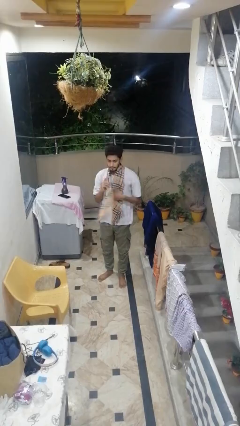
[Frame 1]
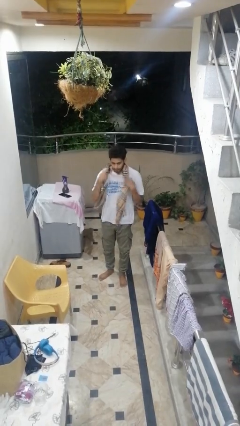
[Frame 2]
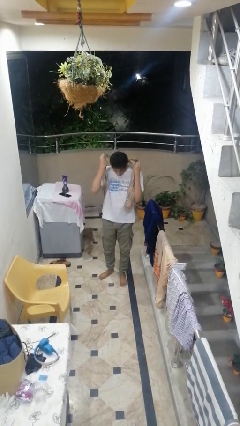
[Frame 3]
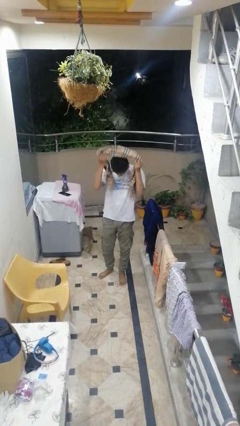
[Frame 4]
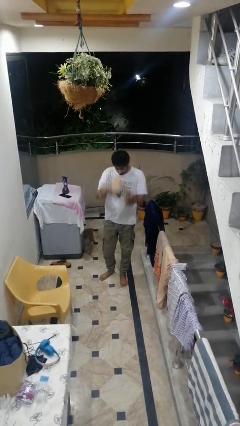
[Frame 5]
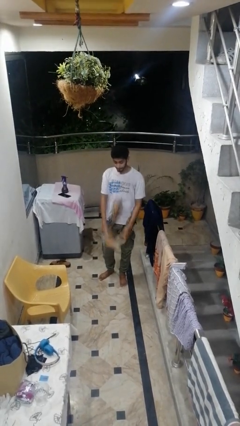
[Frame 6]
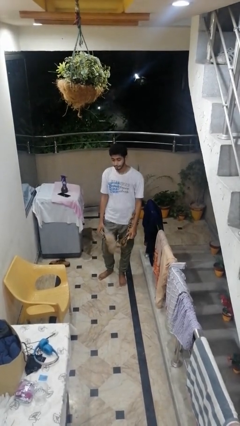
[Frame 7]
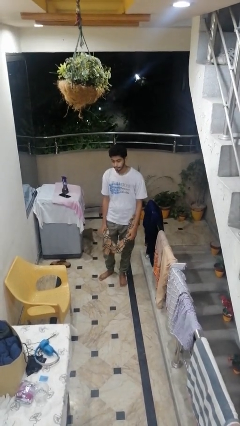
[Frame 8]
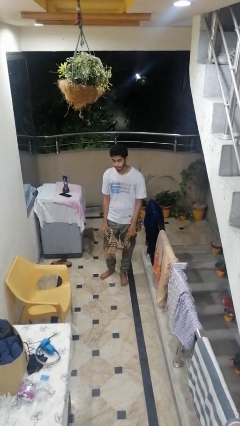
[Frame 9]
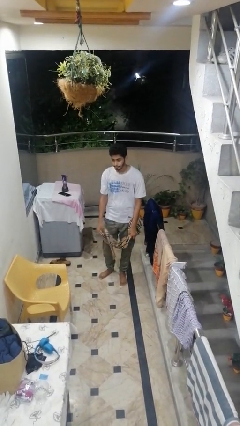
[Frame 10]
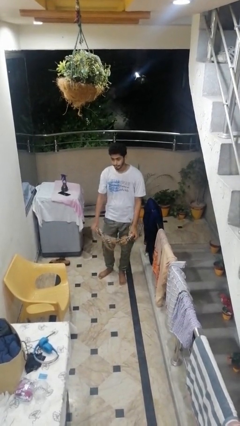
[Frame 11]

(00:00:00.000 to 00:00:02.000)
person takes off scarf

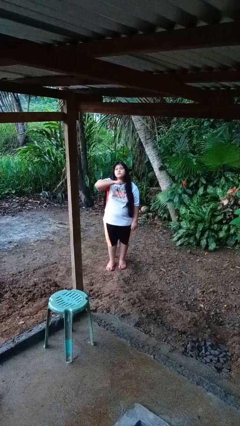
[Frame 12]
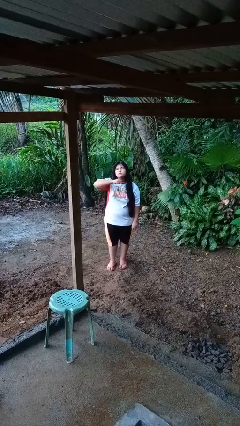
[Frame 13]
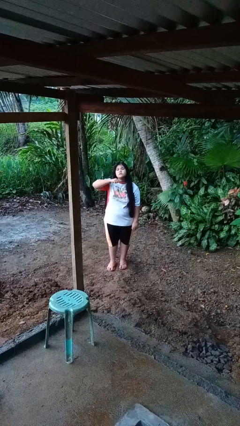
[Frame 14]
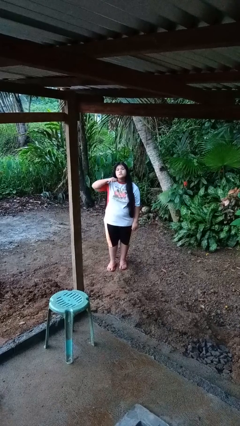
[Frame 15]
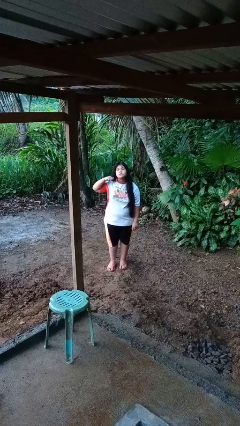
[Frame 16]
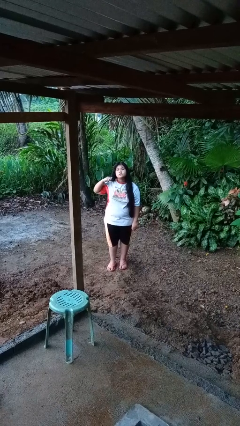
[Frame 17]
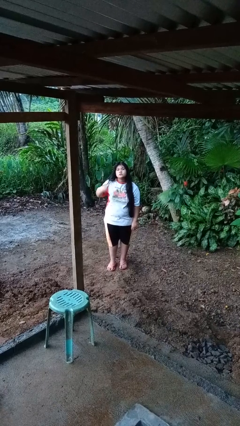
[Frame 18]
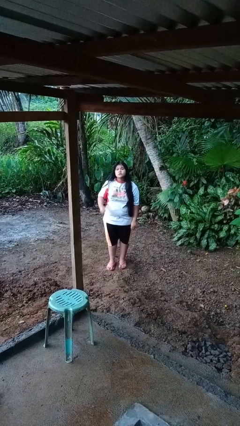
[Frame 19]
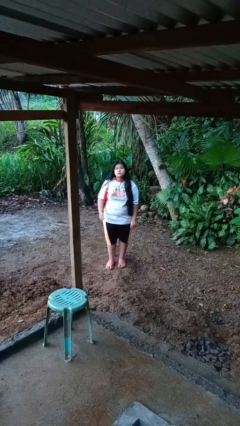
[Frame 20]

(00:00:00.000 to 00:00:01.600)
person gestures cut

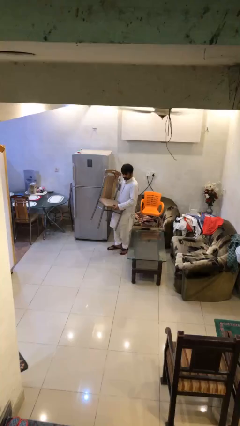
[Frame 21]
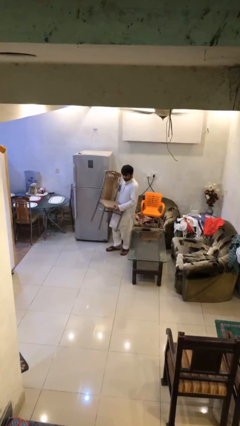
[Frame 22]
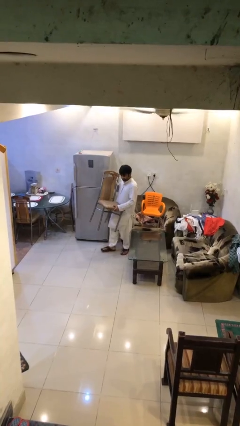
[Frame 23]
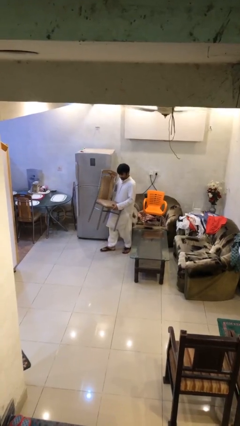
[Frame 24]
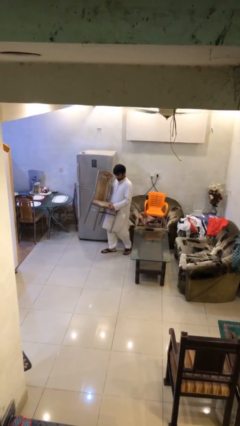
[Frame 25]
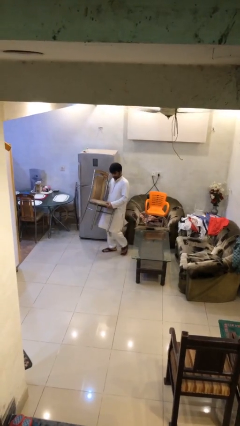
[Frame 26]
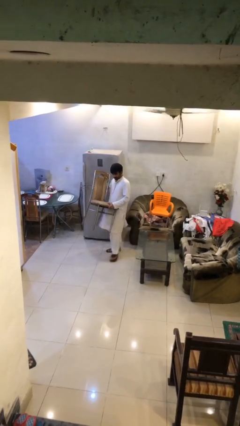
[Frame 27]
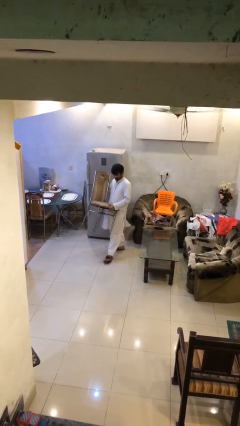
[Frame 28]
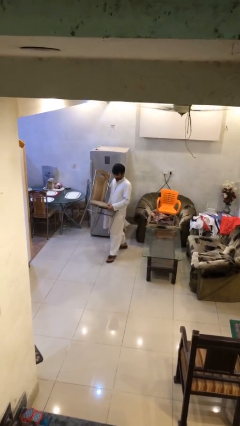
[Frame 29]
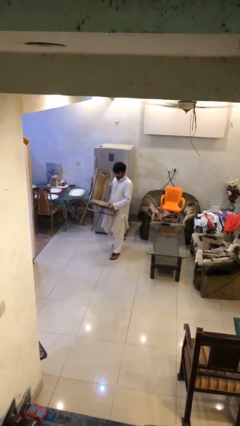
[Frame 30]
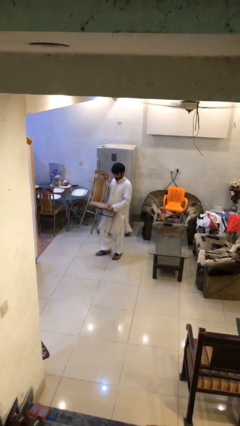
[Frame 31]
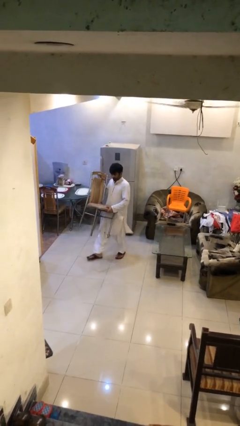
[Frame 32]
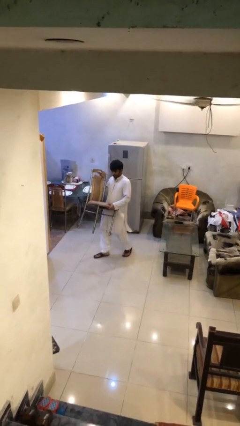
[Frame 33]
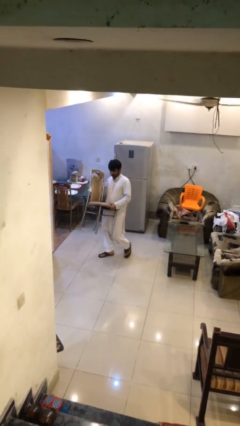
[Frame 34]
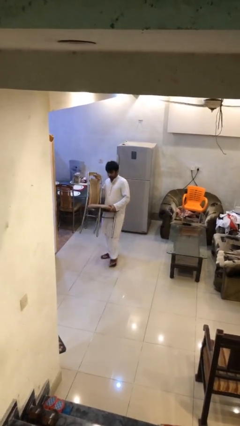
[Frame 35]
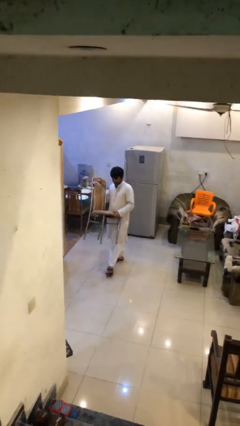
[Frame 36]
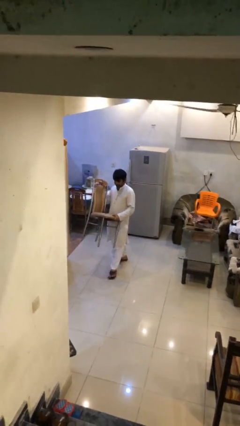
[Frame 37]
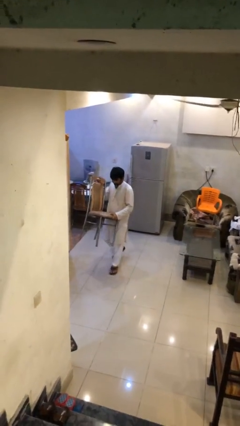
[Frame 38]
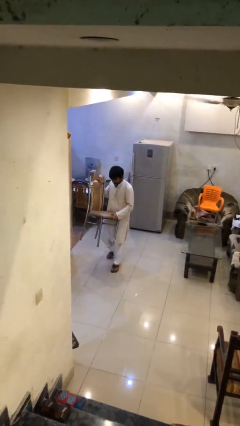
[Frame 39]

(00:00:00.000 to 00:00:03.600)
person carries heavy object

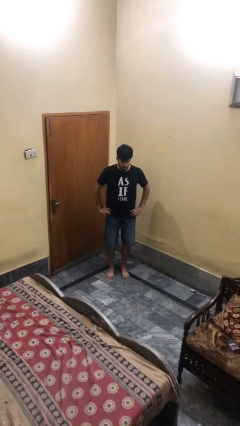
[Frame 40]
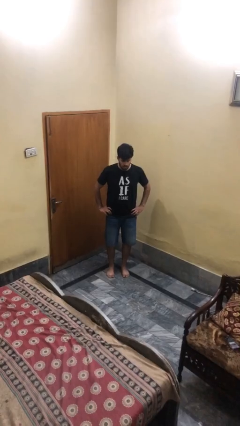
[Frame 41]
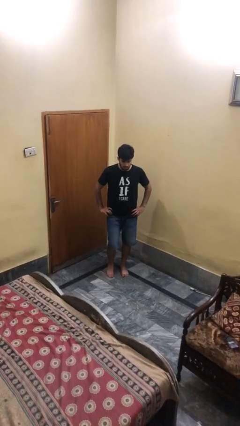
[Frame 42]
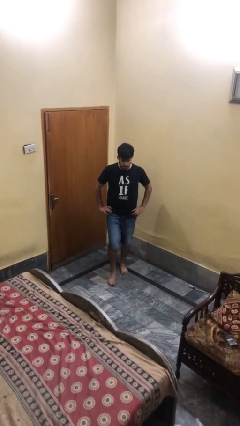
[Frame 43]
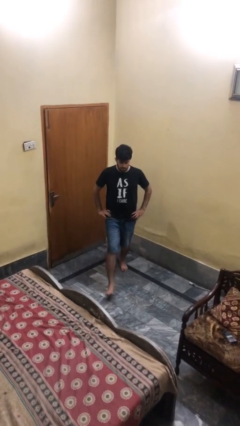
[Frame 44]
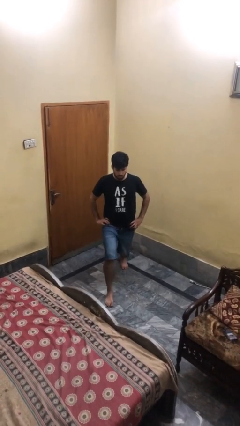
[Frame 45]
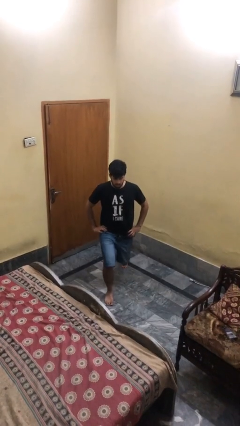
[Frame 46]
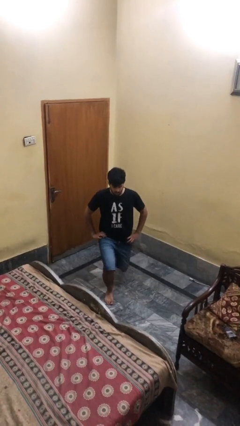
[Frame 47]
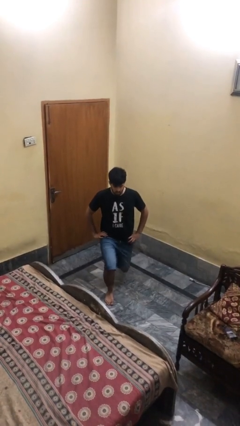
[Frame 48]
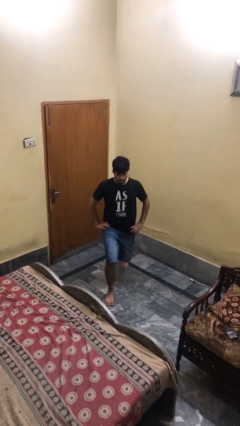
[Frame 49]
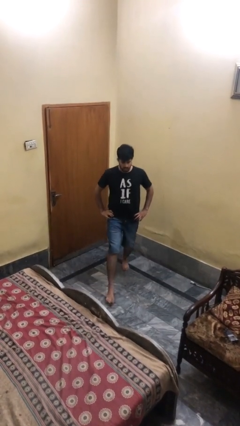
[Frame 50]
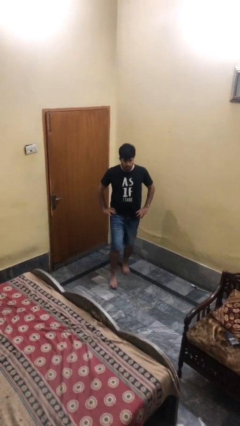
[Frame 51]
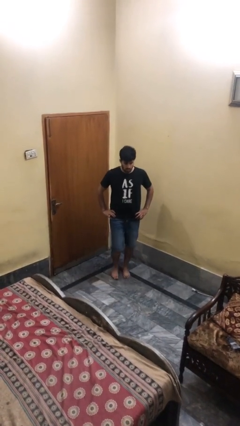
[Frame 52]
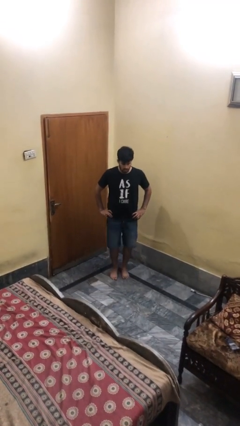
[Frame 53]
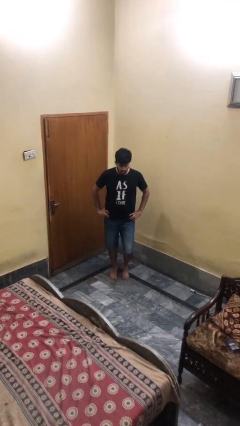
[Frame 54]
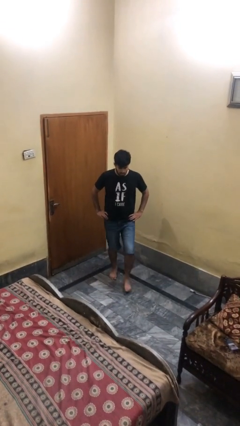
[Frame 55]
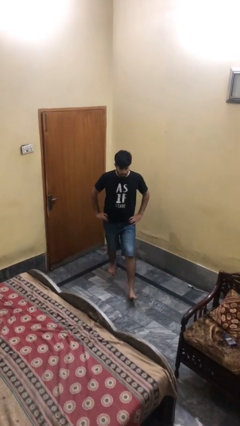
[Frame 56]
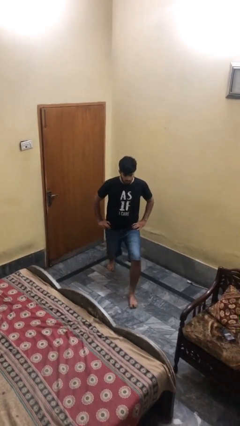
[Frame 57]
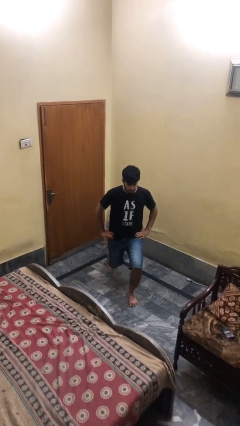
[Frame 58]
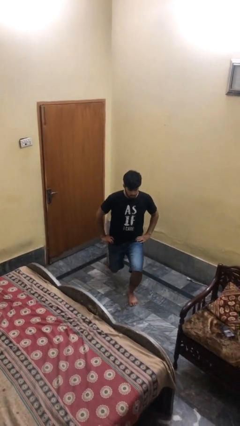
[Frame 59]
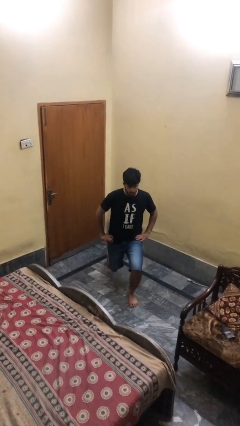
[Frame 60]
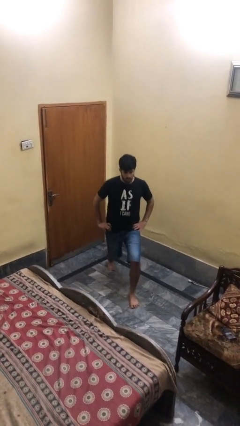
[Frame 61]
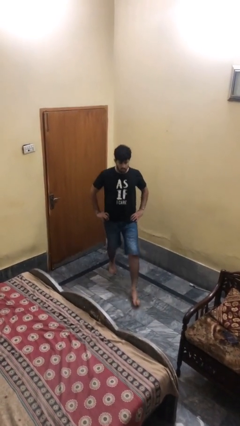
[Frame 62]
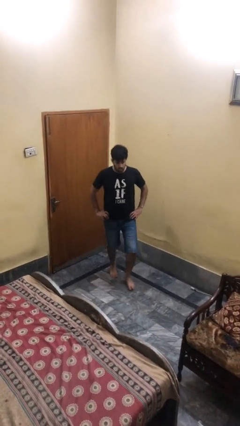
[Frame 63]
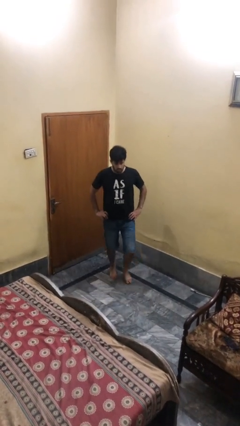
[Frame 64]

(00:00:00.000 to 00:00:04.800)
person exercises with lunges

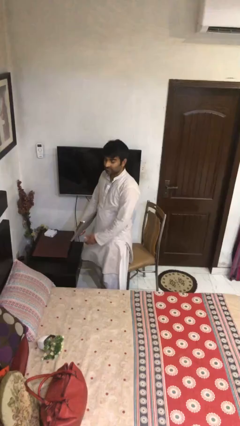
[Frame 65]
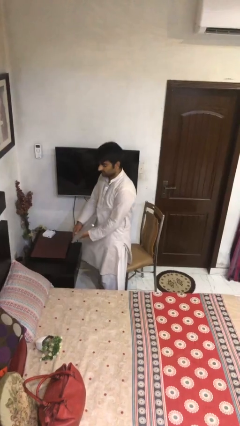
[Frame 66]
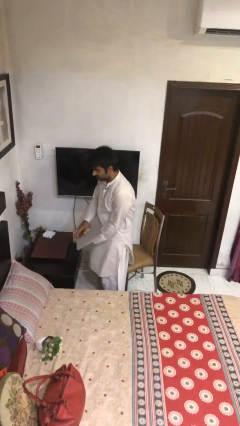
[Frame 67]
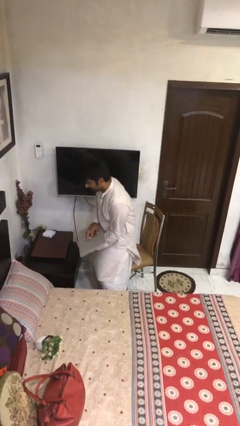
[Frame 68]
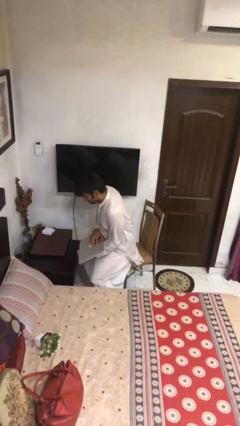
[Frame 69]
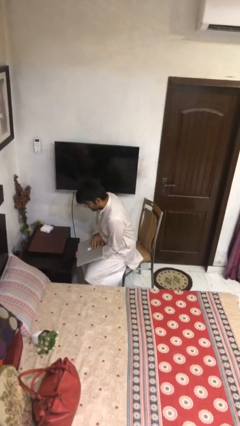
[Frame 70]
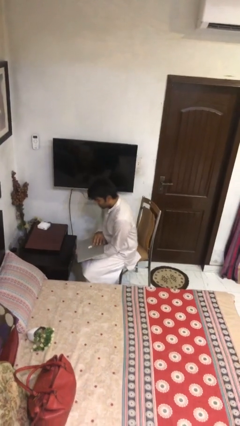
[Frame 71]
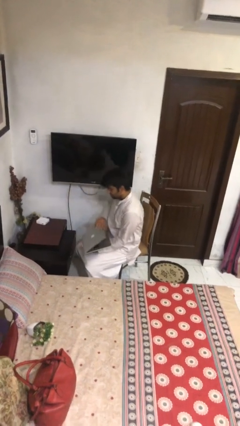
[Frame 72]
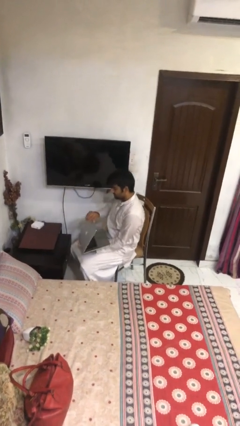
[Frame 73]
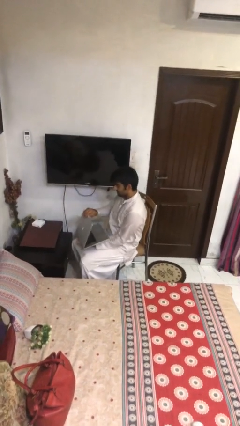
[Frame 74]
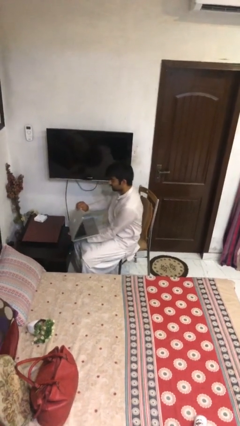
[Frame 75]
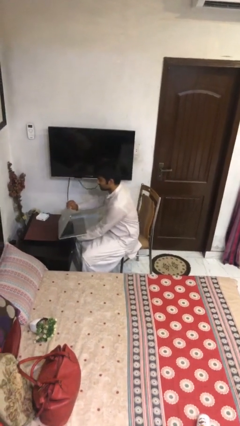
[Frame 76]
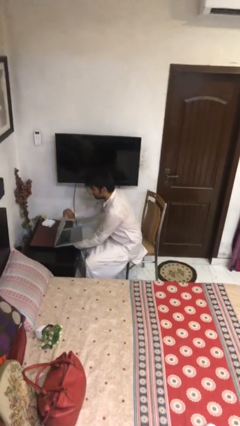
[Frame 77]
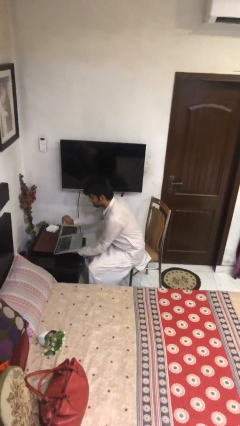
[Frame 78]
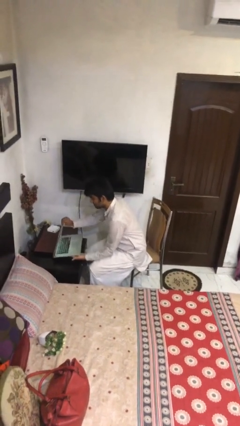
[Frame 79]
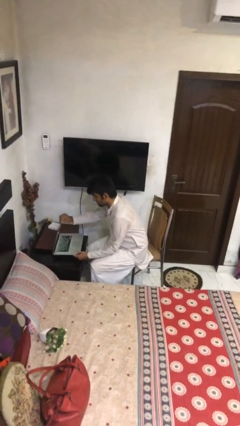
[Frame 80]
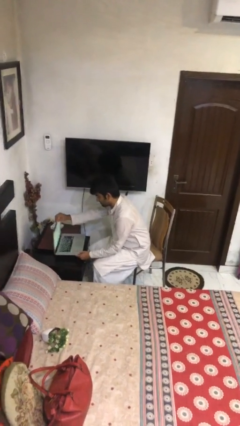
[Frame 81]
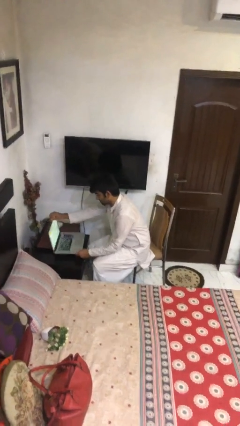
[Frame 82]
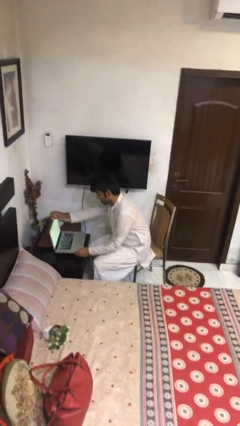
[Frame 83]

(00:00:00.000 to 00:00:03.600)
person sits down

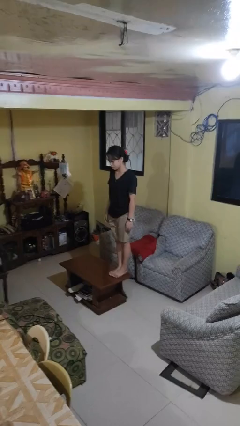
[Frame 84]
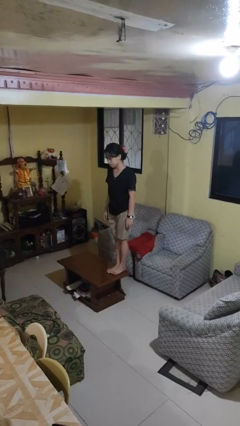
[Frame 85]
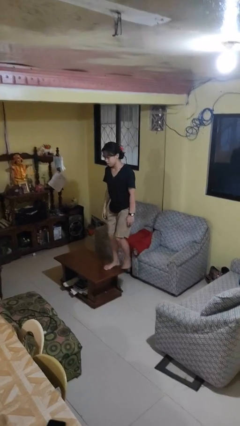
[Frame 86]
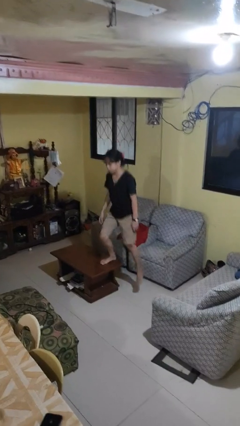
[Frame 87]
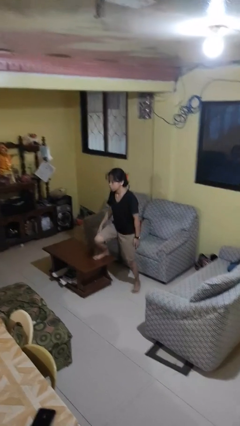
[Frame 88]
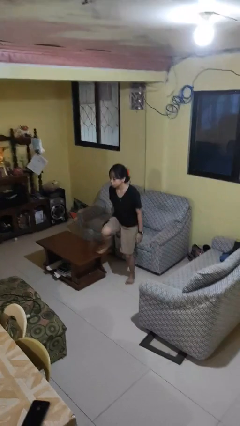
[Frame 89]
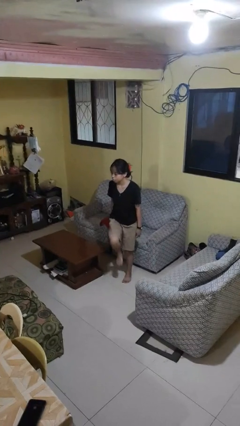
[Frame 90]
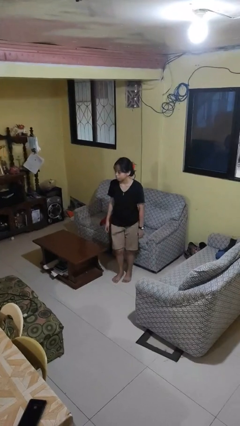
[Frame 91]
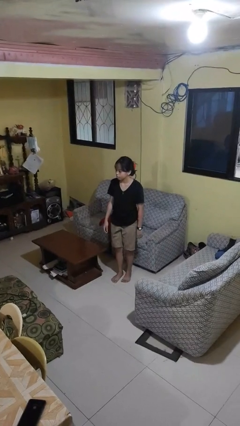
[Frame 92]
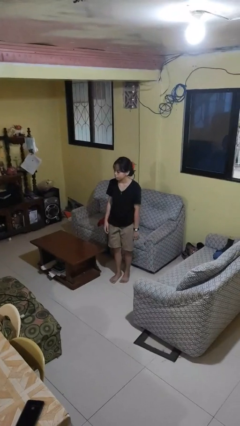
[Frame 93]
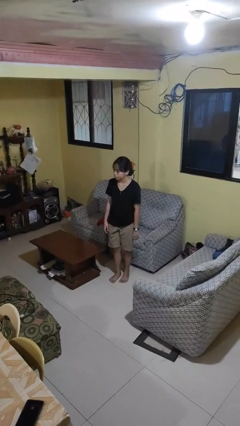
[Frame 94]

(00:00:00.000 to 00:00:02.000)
person climbs off table
